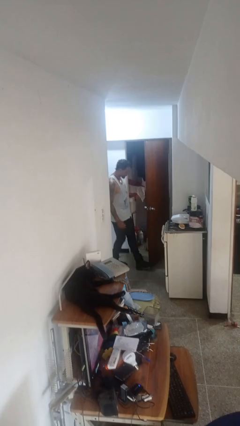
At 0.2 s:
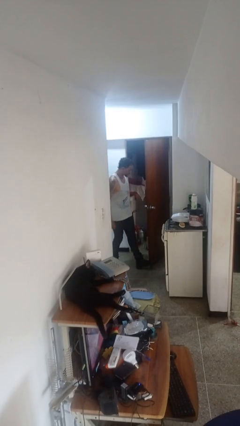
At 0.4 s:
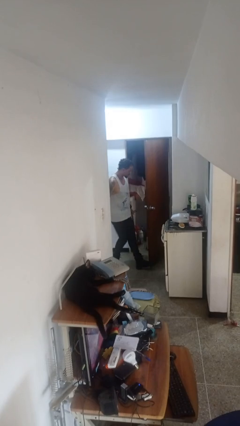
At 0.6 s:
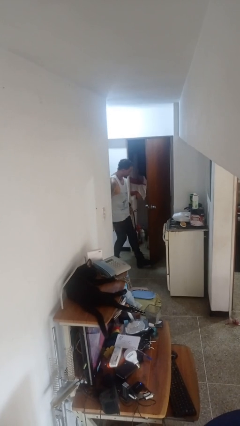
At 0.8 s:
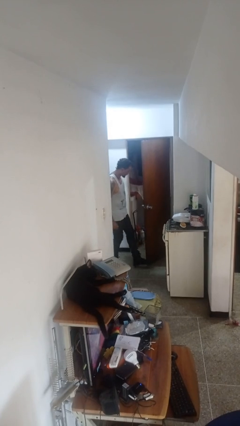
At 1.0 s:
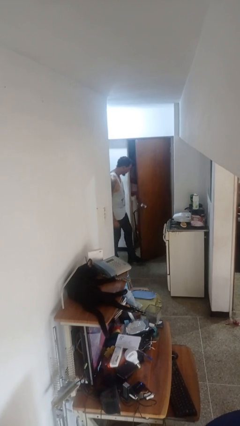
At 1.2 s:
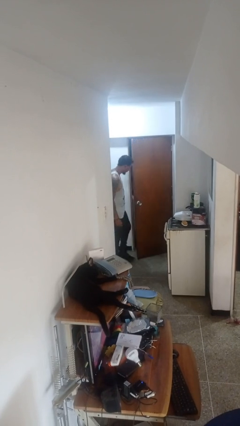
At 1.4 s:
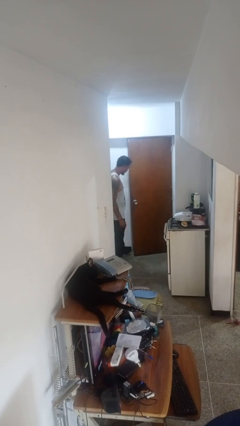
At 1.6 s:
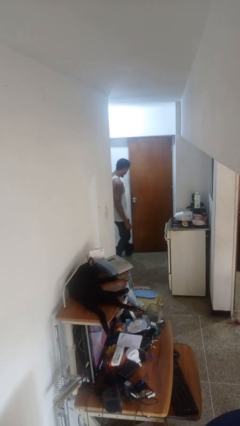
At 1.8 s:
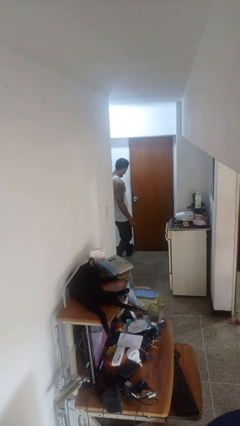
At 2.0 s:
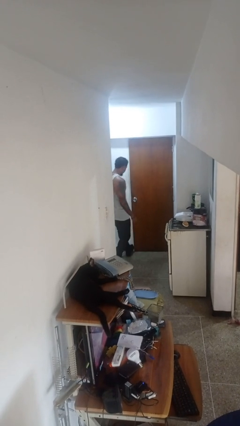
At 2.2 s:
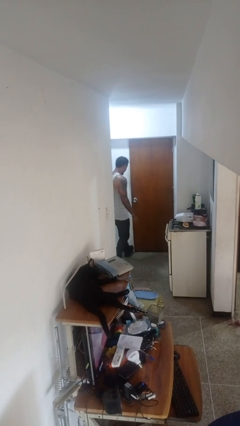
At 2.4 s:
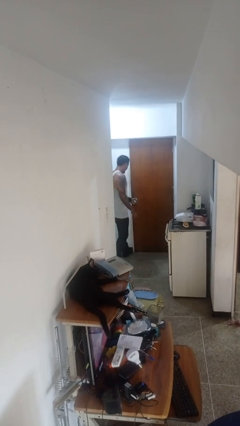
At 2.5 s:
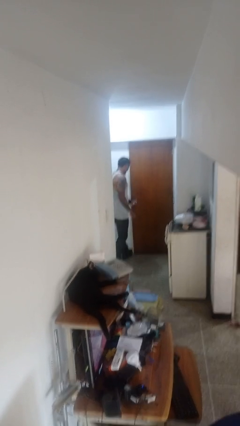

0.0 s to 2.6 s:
person closes door with foot

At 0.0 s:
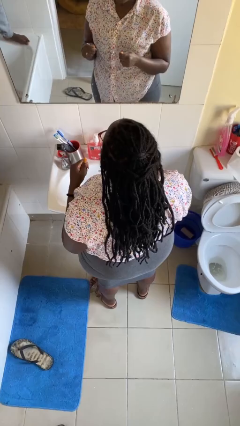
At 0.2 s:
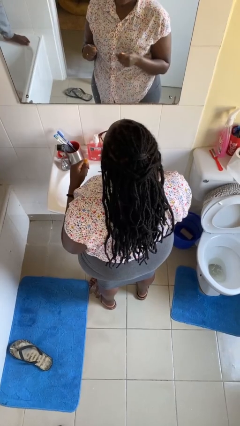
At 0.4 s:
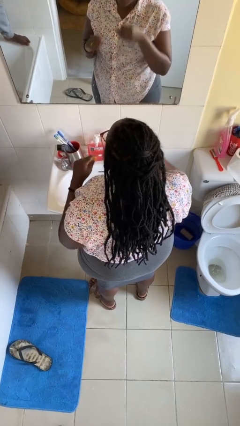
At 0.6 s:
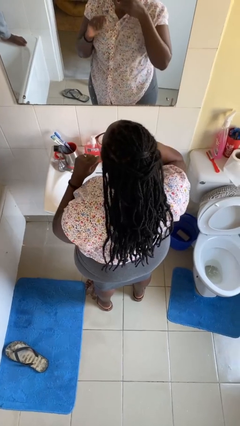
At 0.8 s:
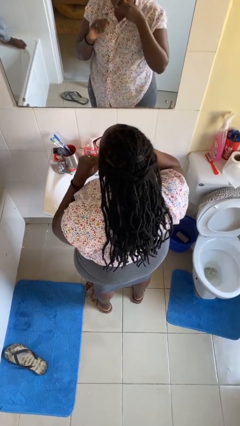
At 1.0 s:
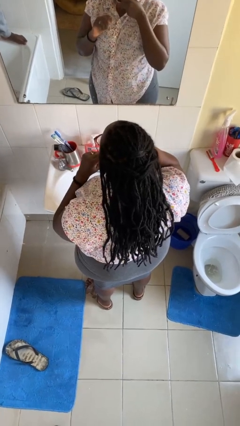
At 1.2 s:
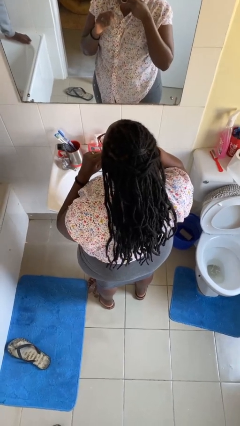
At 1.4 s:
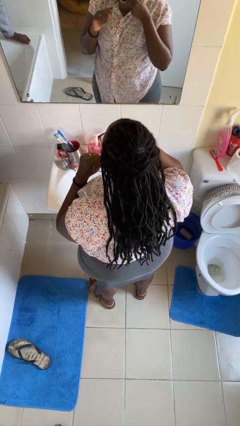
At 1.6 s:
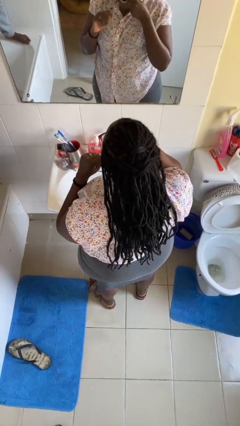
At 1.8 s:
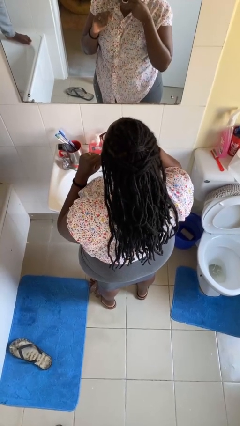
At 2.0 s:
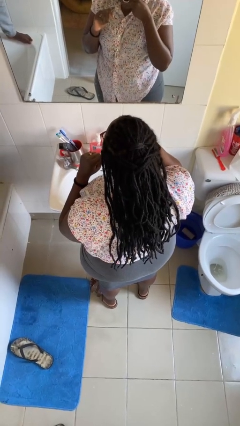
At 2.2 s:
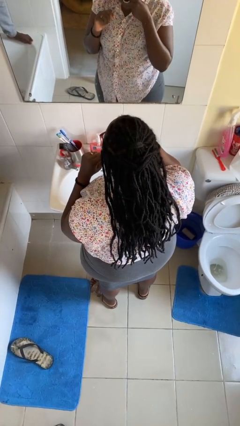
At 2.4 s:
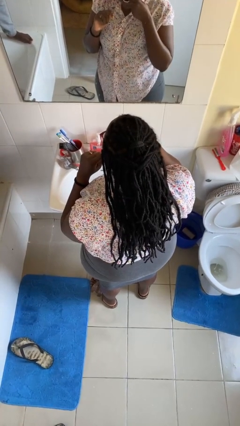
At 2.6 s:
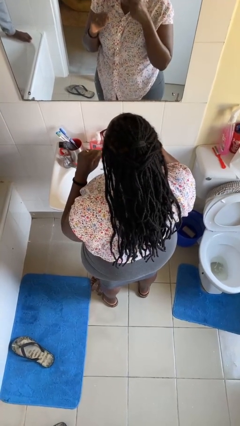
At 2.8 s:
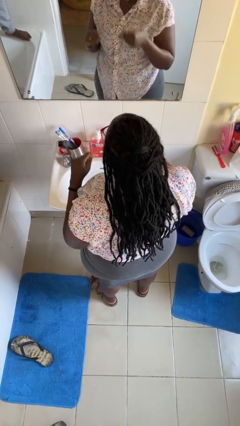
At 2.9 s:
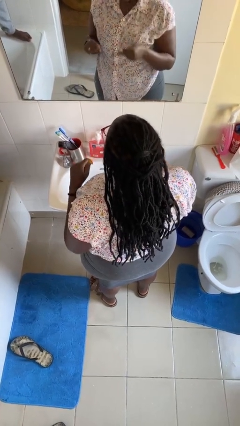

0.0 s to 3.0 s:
person flosses

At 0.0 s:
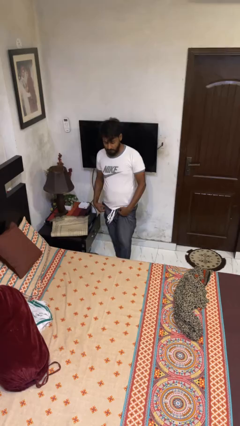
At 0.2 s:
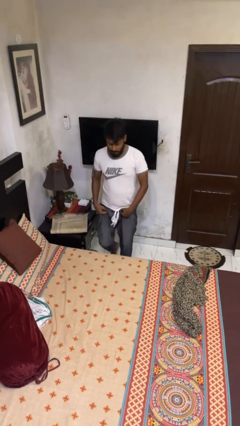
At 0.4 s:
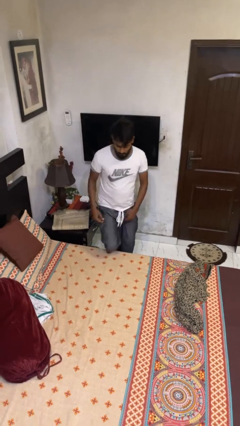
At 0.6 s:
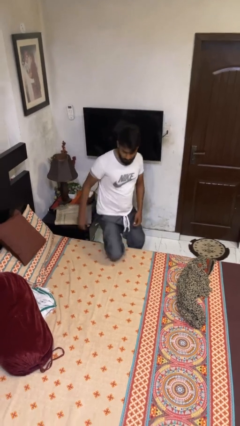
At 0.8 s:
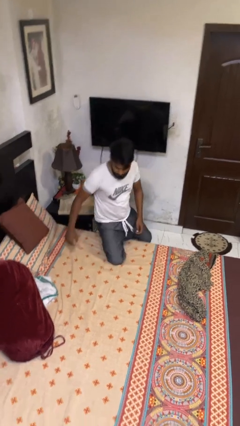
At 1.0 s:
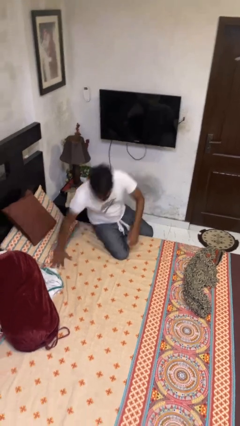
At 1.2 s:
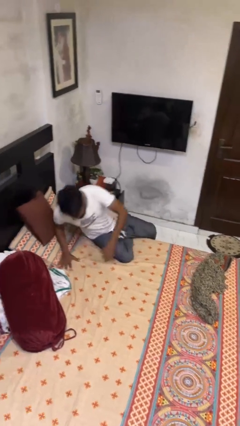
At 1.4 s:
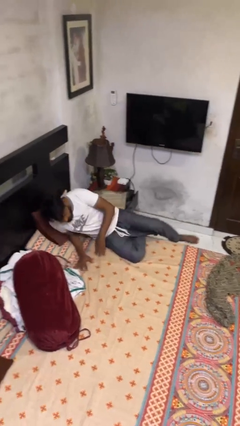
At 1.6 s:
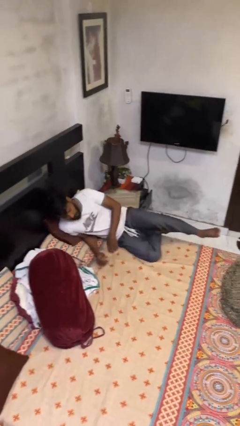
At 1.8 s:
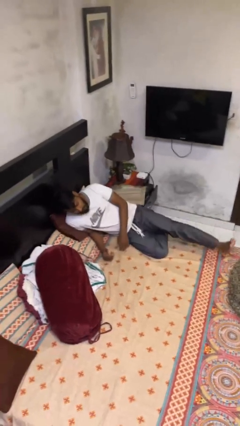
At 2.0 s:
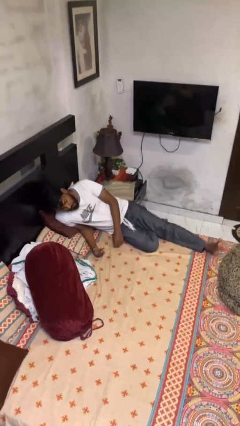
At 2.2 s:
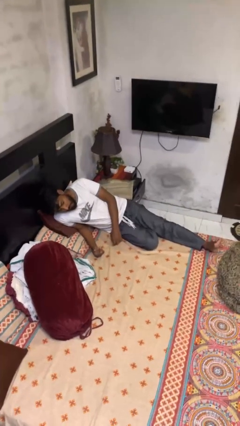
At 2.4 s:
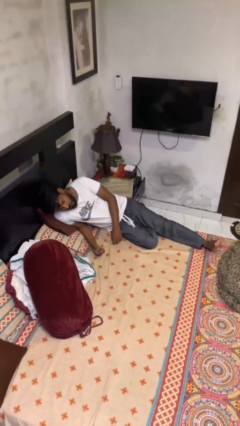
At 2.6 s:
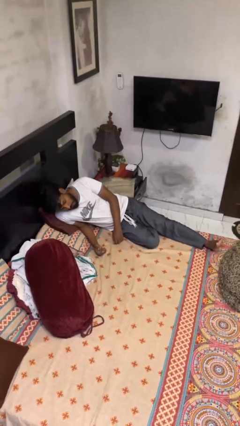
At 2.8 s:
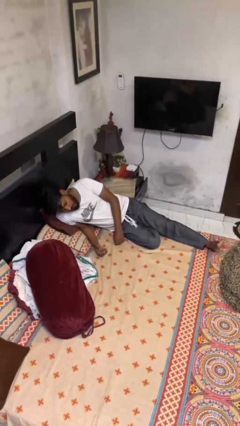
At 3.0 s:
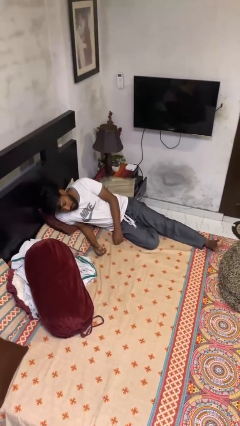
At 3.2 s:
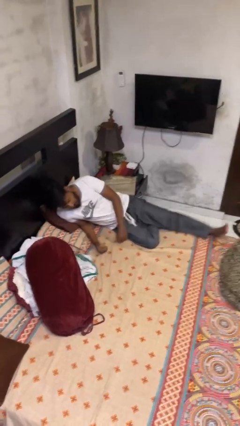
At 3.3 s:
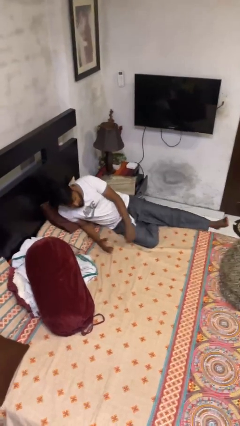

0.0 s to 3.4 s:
person lies down on bed

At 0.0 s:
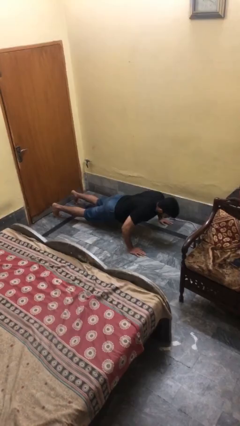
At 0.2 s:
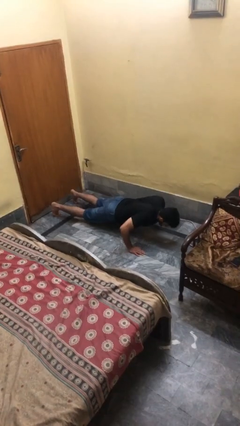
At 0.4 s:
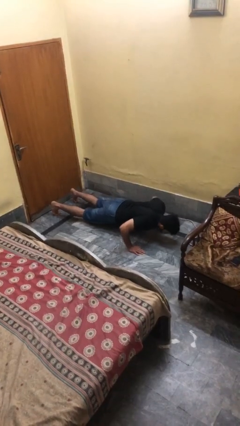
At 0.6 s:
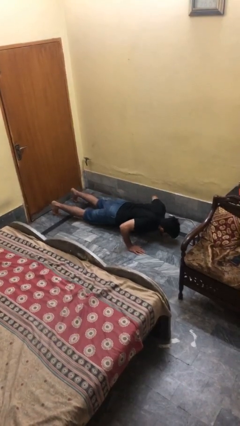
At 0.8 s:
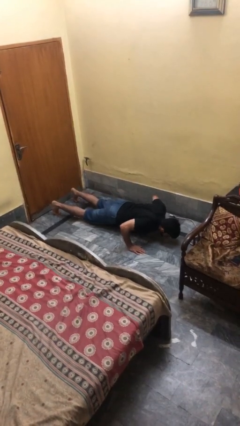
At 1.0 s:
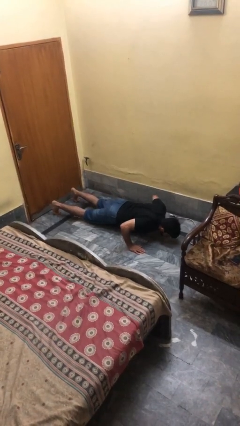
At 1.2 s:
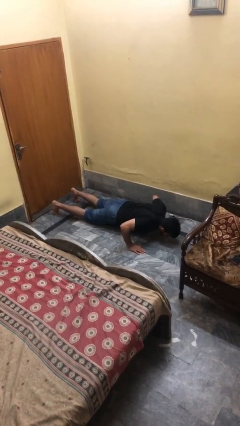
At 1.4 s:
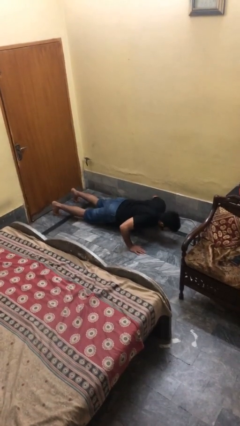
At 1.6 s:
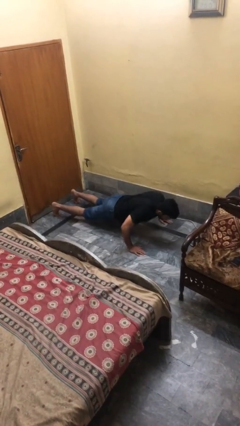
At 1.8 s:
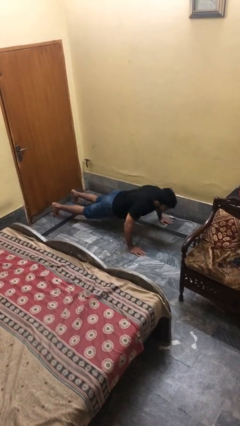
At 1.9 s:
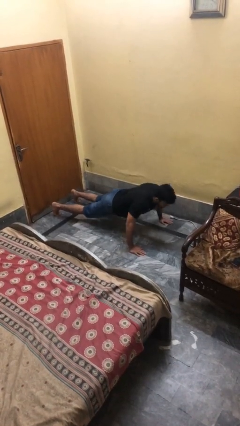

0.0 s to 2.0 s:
person exercises with pushup

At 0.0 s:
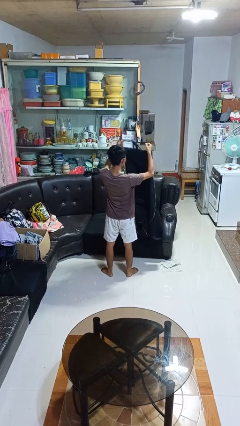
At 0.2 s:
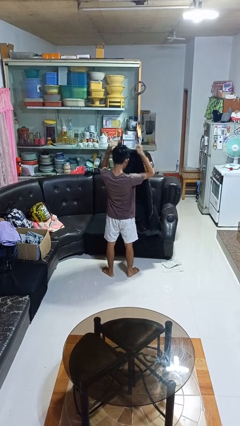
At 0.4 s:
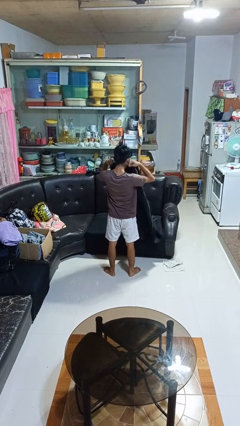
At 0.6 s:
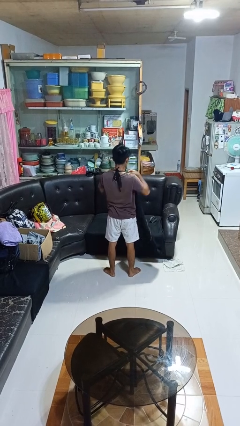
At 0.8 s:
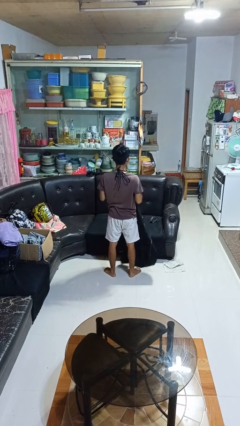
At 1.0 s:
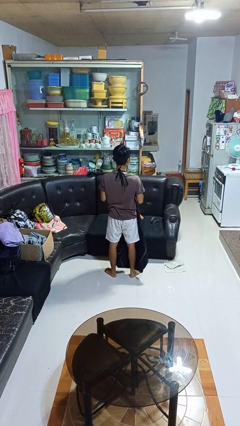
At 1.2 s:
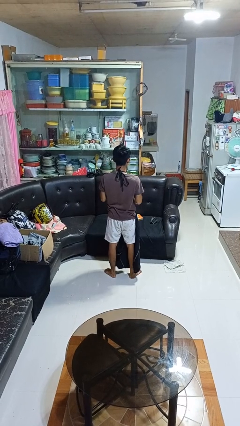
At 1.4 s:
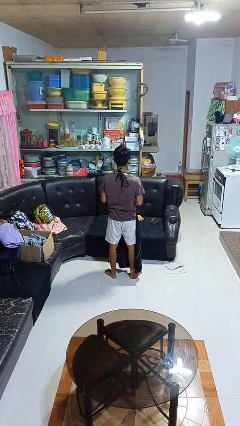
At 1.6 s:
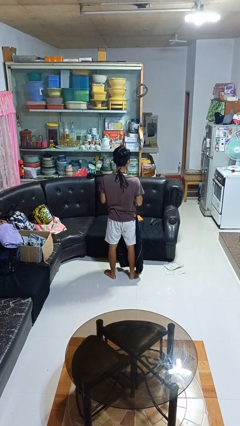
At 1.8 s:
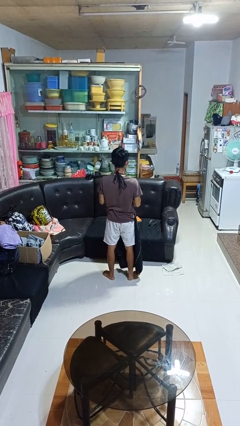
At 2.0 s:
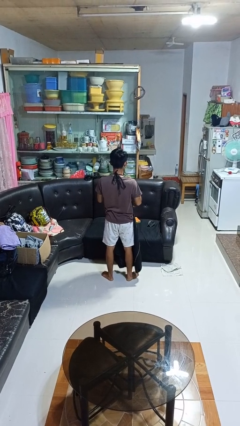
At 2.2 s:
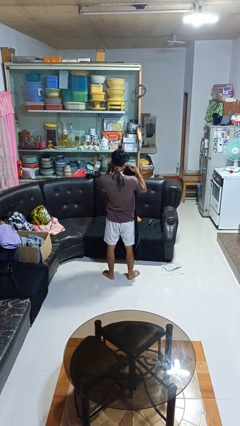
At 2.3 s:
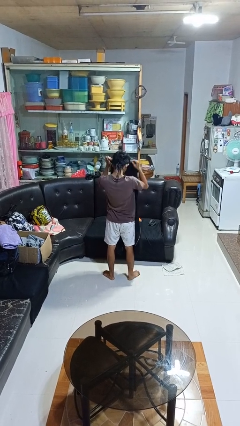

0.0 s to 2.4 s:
person puts on apron

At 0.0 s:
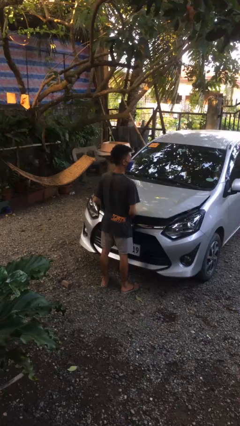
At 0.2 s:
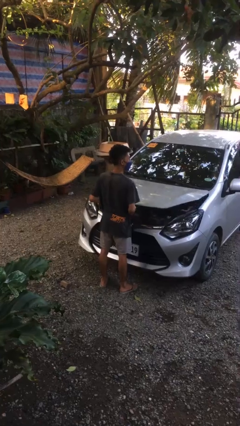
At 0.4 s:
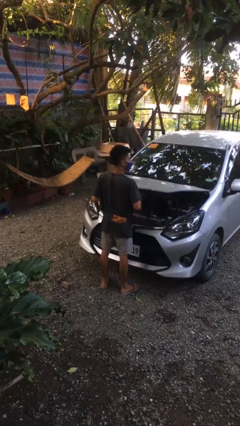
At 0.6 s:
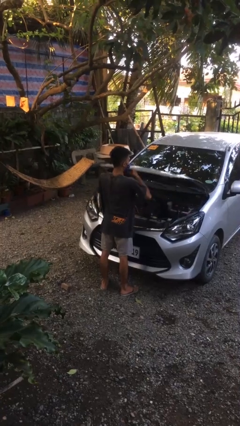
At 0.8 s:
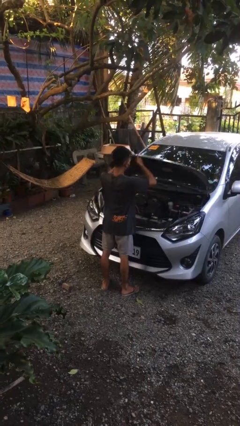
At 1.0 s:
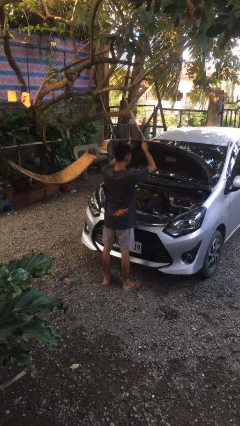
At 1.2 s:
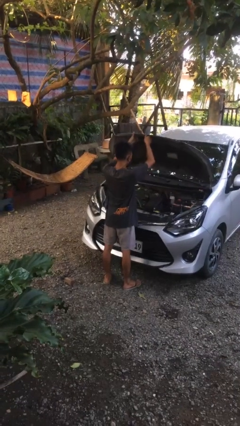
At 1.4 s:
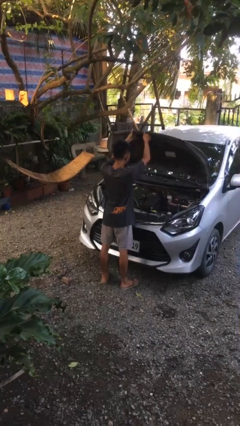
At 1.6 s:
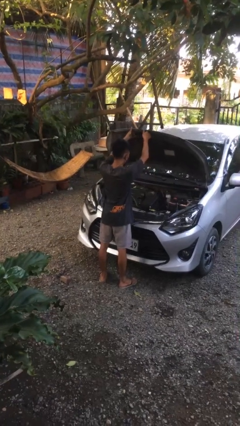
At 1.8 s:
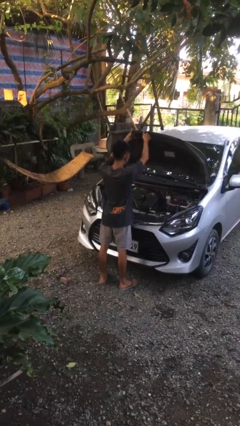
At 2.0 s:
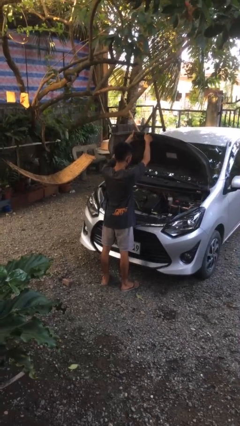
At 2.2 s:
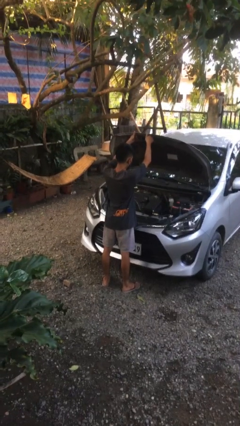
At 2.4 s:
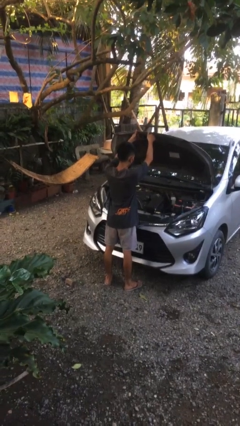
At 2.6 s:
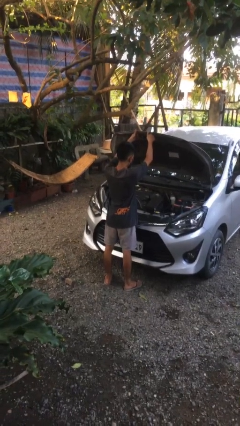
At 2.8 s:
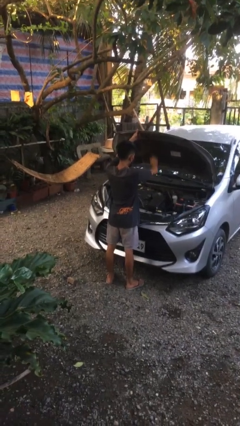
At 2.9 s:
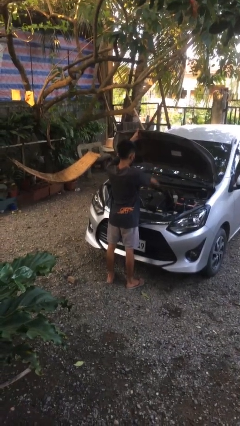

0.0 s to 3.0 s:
person opens car hood

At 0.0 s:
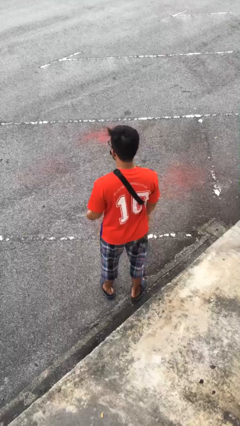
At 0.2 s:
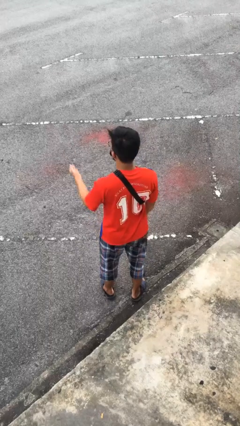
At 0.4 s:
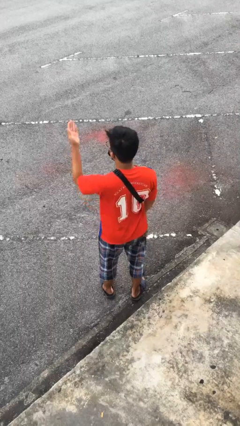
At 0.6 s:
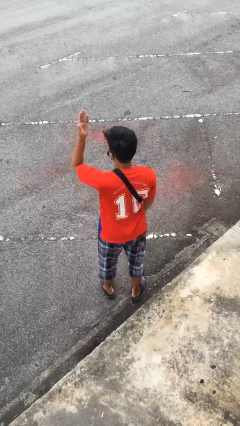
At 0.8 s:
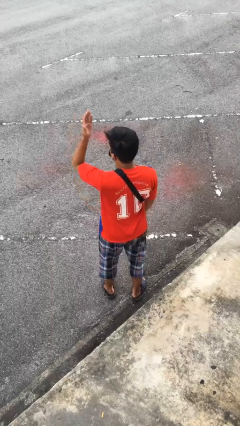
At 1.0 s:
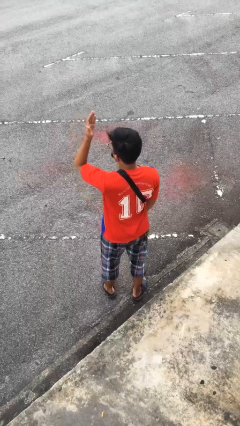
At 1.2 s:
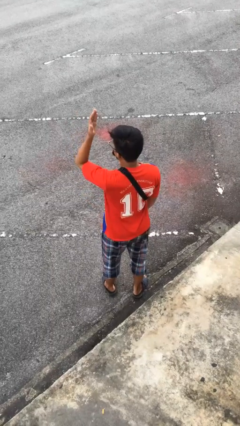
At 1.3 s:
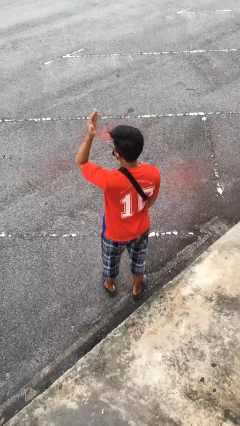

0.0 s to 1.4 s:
person gestures swipe up
